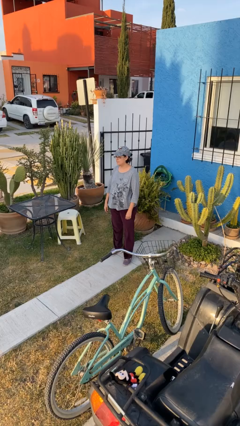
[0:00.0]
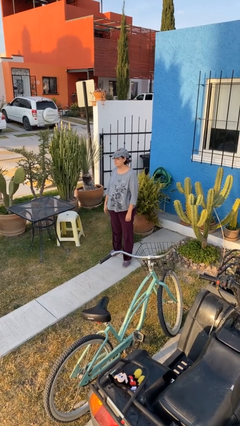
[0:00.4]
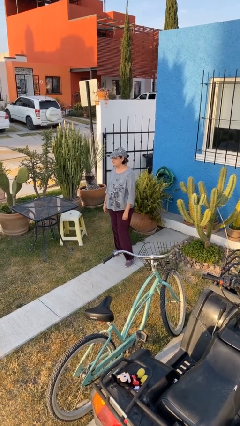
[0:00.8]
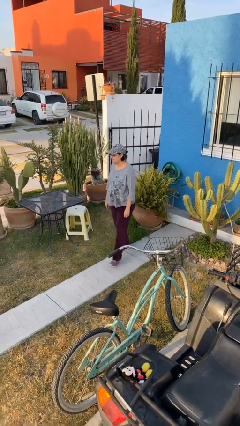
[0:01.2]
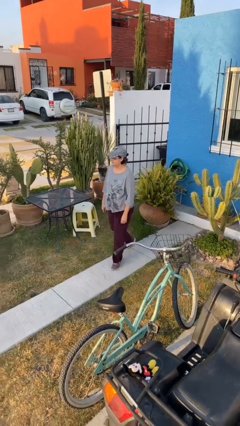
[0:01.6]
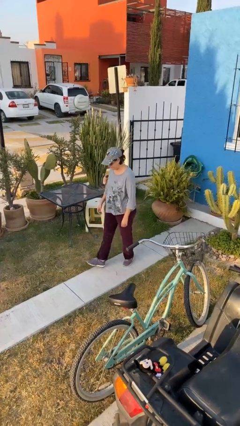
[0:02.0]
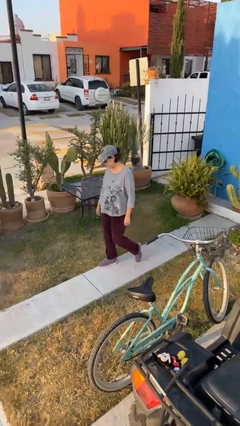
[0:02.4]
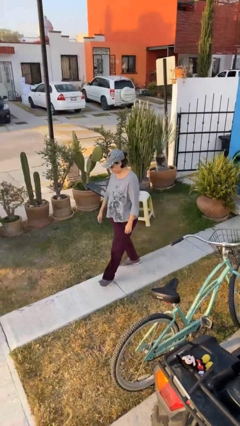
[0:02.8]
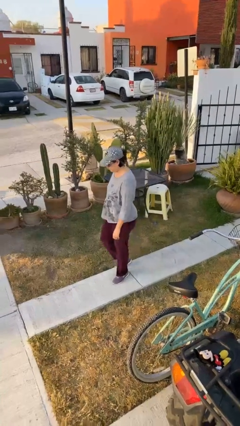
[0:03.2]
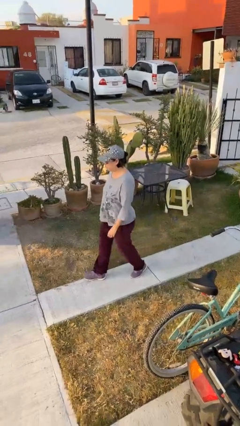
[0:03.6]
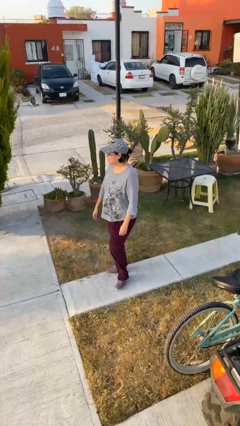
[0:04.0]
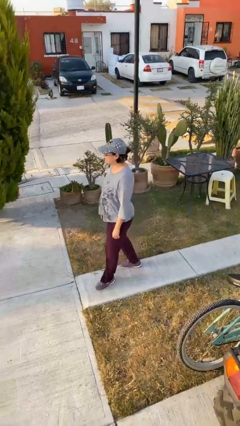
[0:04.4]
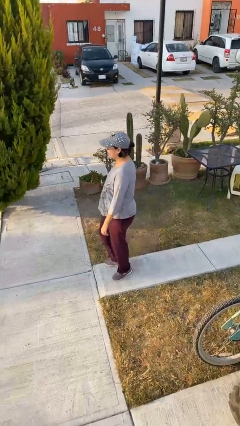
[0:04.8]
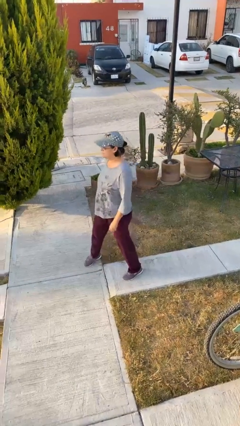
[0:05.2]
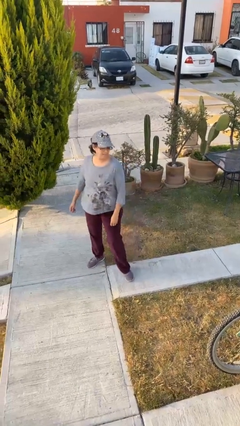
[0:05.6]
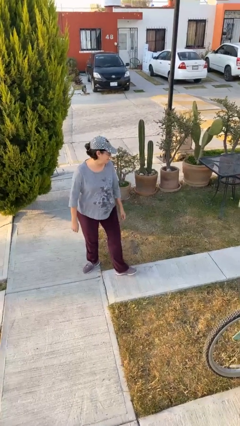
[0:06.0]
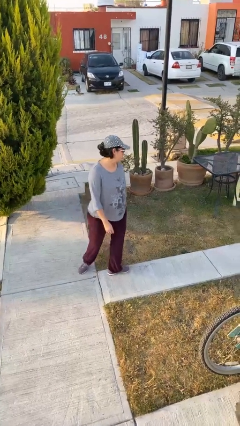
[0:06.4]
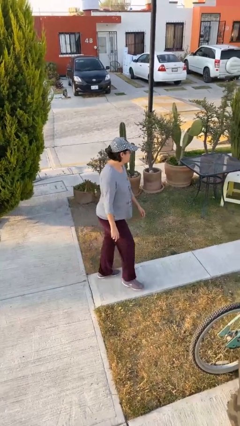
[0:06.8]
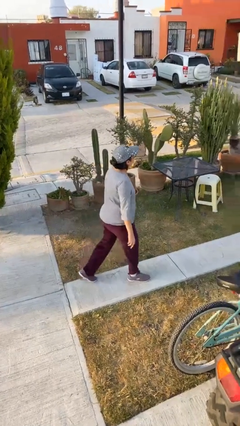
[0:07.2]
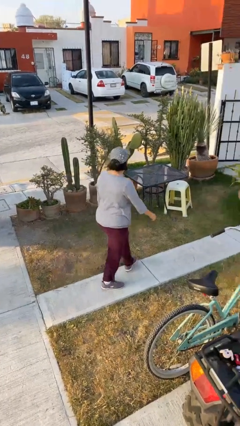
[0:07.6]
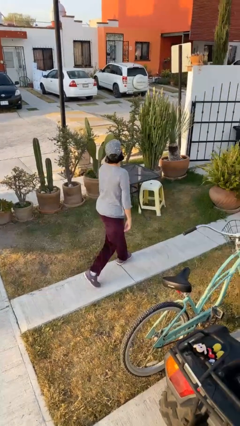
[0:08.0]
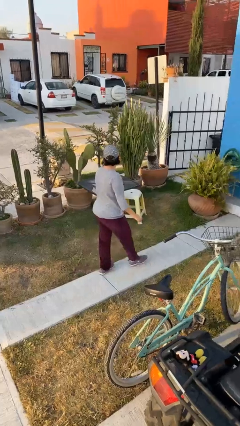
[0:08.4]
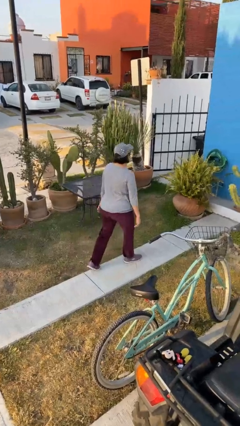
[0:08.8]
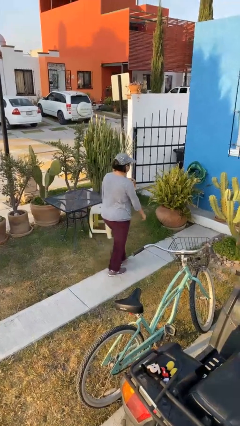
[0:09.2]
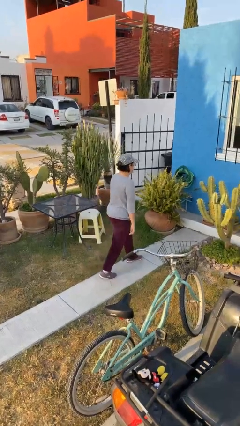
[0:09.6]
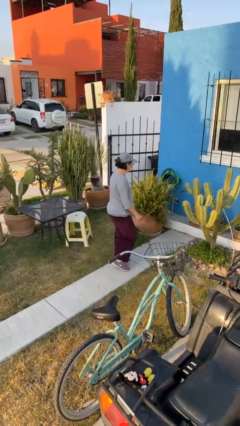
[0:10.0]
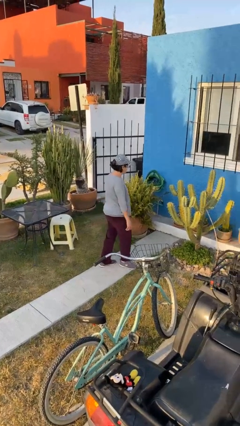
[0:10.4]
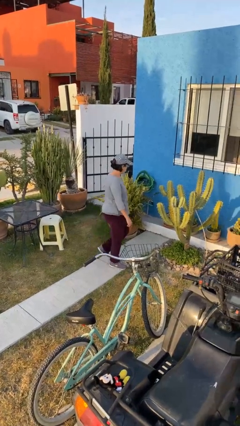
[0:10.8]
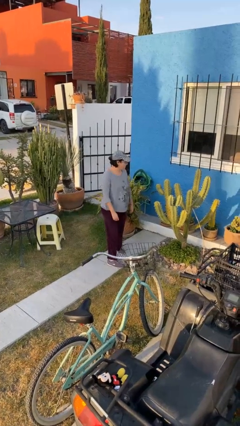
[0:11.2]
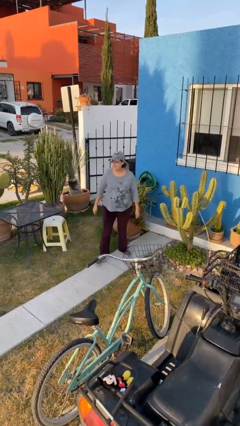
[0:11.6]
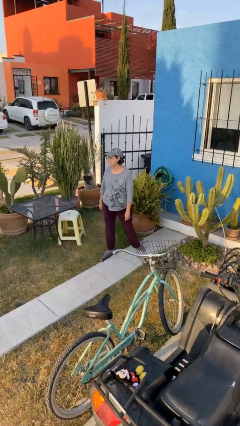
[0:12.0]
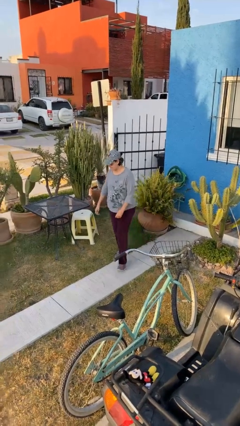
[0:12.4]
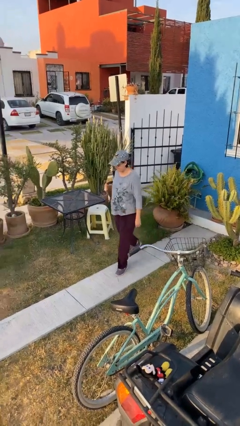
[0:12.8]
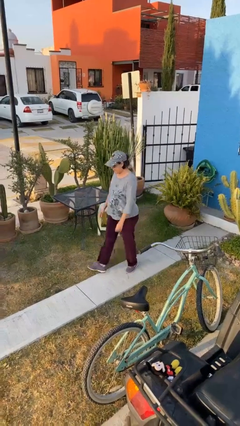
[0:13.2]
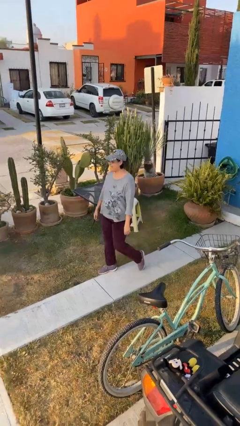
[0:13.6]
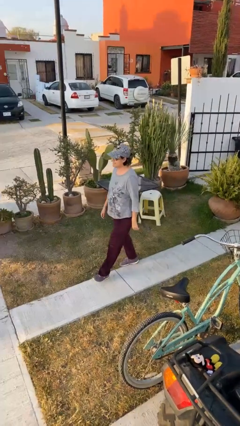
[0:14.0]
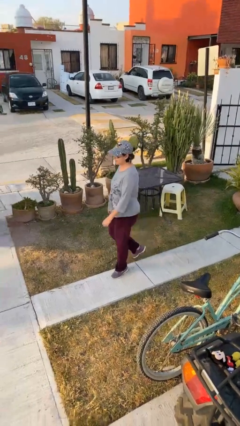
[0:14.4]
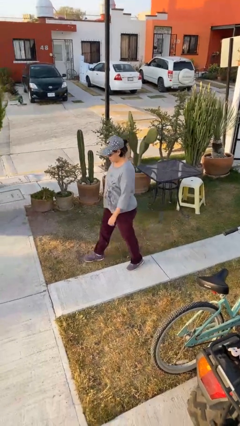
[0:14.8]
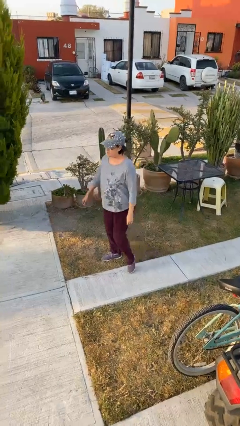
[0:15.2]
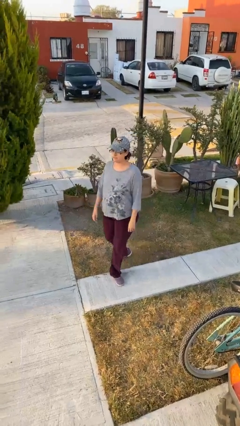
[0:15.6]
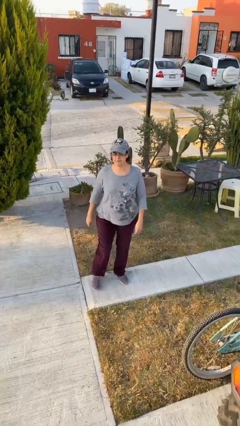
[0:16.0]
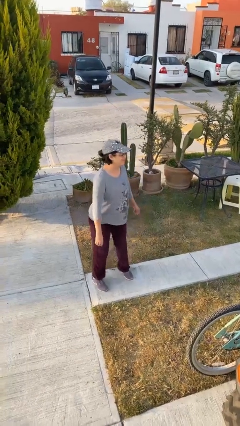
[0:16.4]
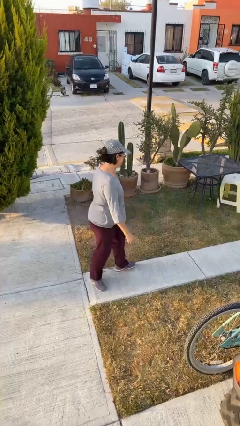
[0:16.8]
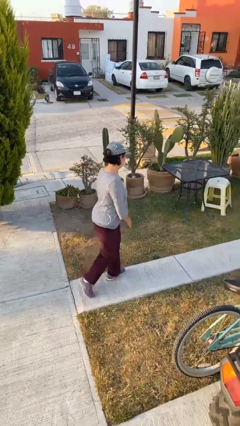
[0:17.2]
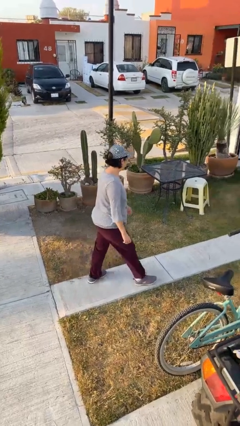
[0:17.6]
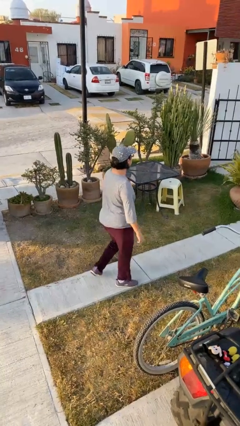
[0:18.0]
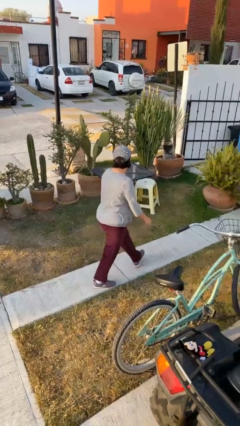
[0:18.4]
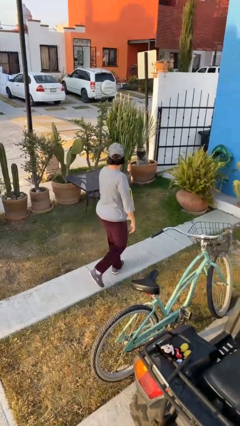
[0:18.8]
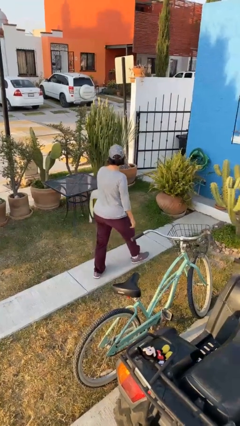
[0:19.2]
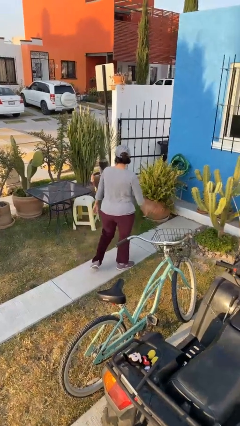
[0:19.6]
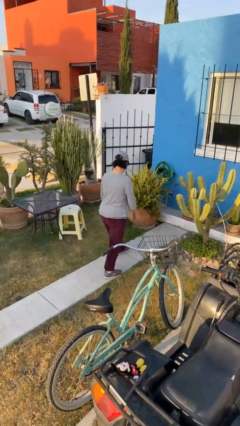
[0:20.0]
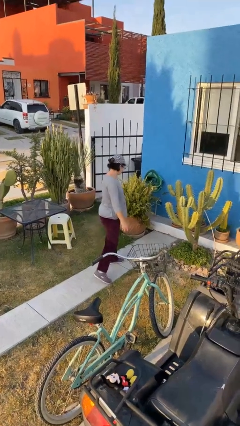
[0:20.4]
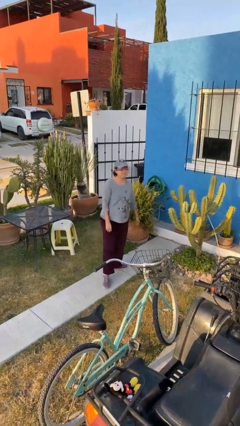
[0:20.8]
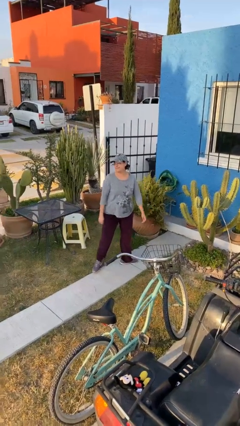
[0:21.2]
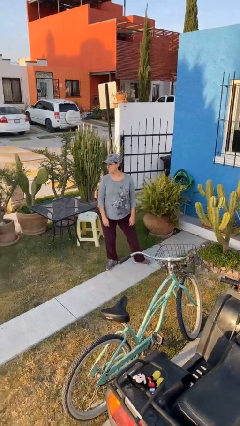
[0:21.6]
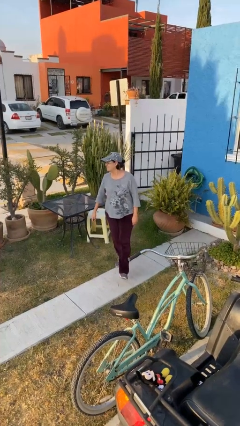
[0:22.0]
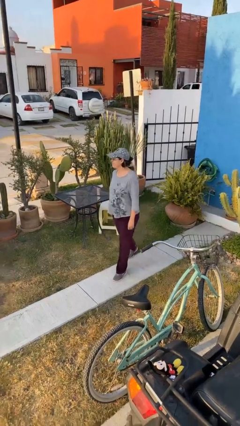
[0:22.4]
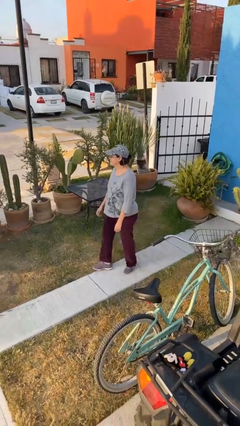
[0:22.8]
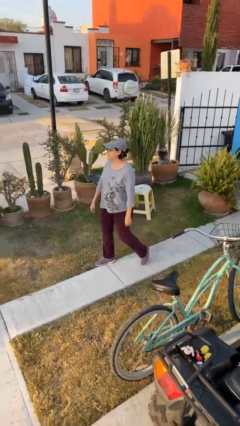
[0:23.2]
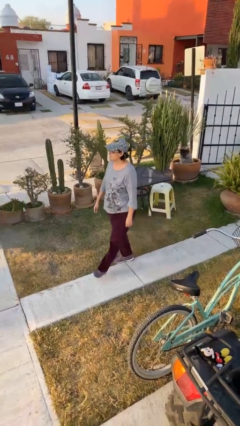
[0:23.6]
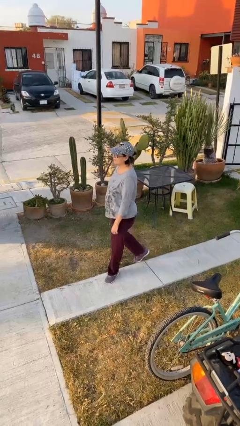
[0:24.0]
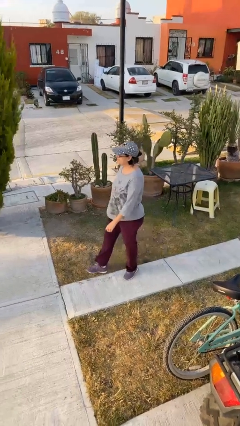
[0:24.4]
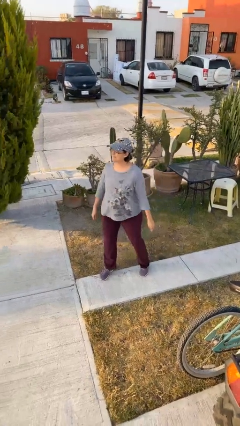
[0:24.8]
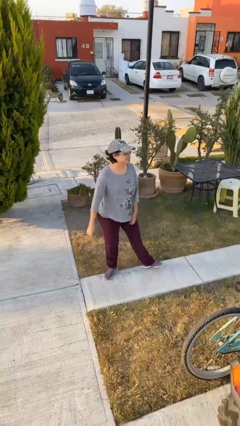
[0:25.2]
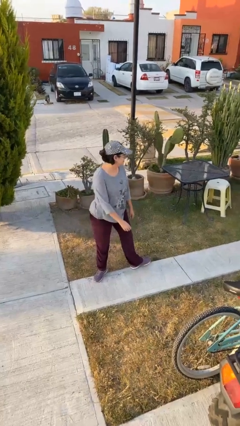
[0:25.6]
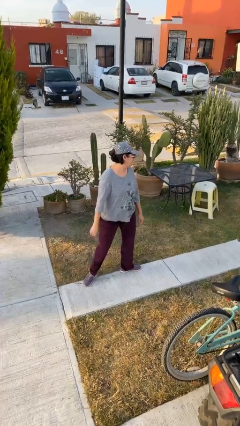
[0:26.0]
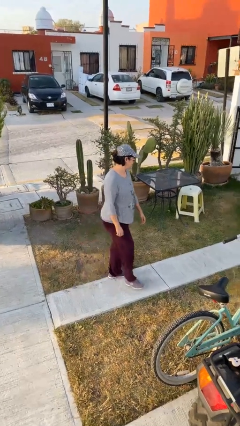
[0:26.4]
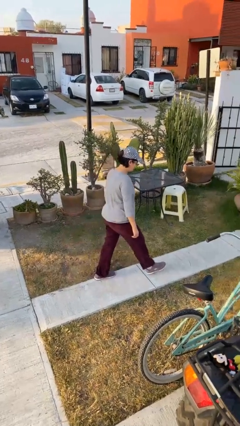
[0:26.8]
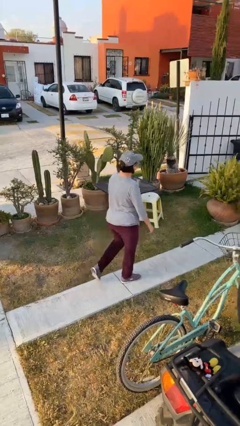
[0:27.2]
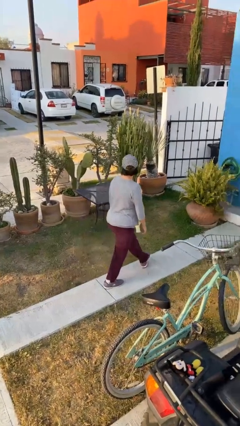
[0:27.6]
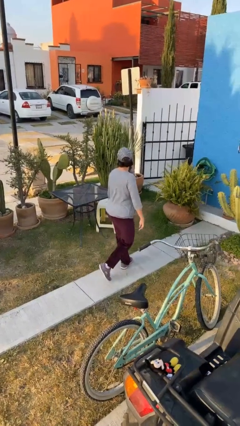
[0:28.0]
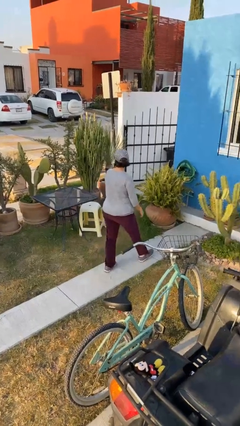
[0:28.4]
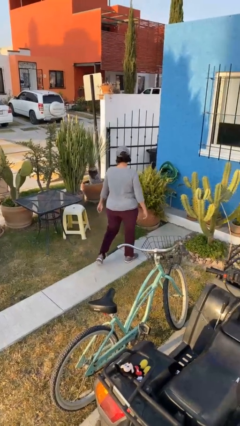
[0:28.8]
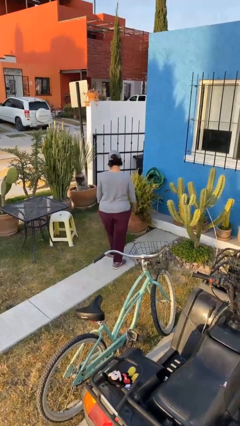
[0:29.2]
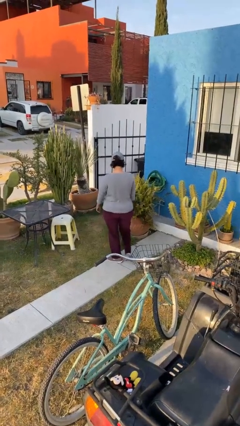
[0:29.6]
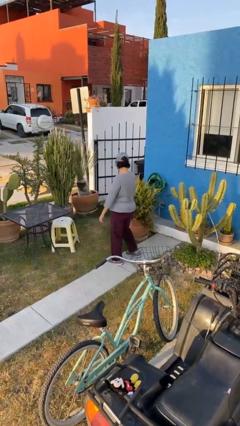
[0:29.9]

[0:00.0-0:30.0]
person walks

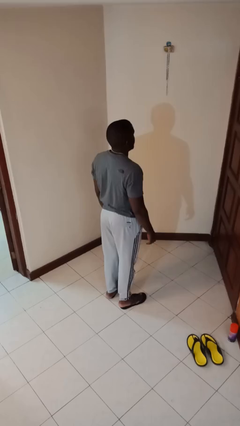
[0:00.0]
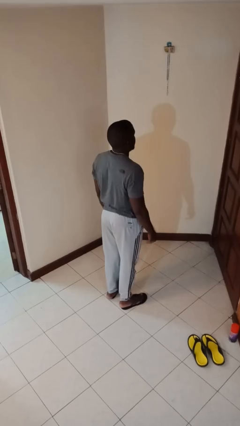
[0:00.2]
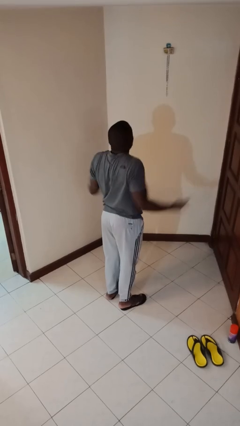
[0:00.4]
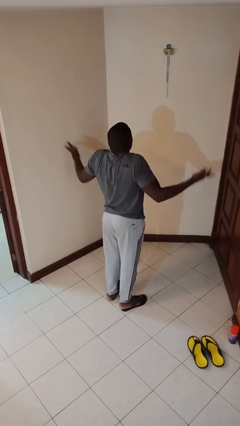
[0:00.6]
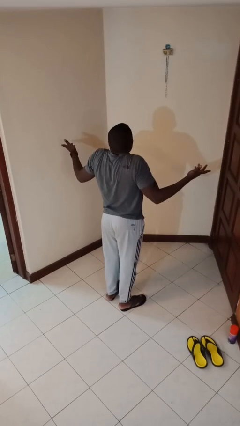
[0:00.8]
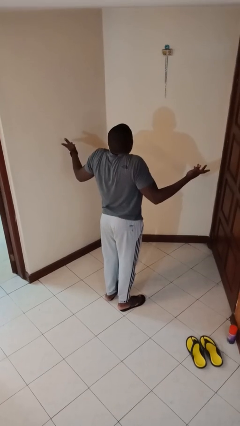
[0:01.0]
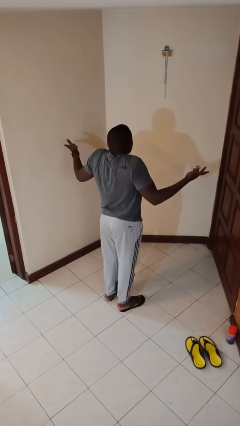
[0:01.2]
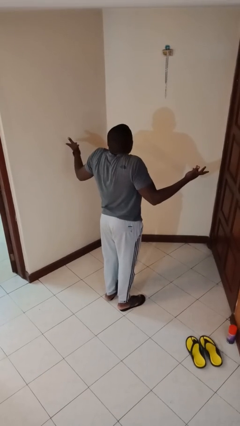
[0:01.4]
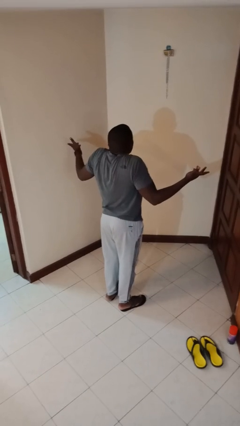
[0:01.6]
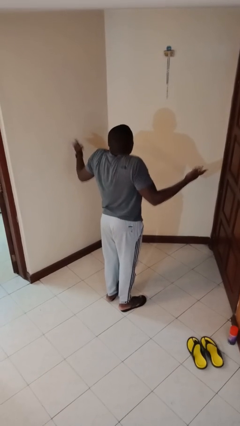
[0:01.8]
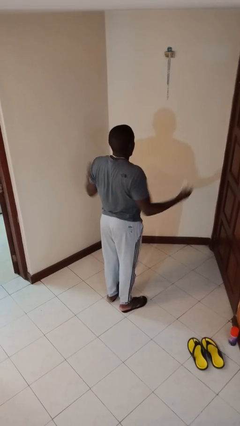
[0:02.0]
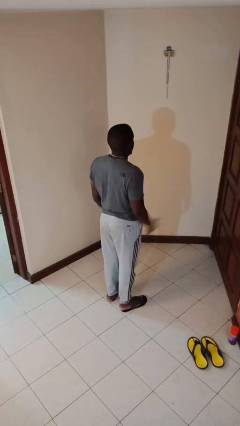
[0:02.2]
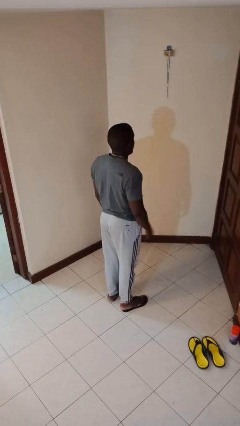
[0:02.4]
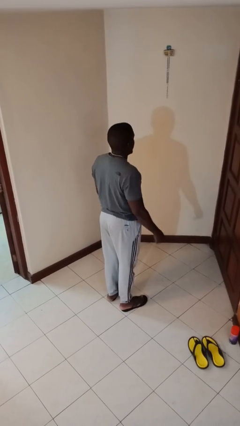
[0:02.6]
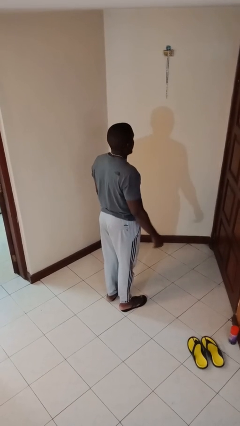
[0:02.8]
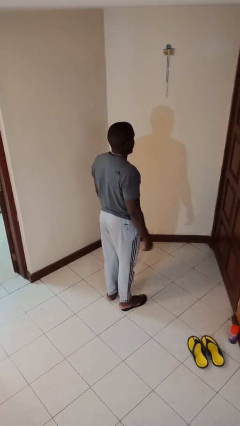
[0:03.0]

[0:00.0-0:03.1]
person shrugs

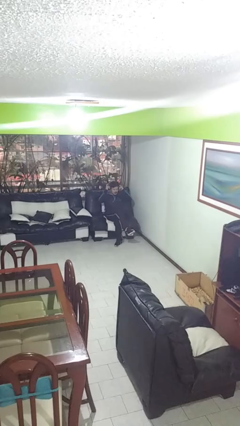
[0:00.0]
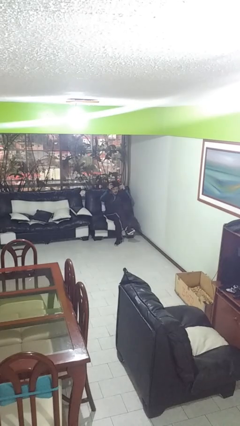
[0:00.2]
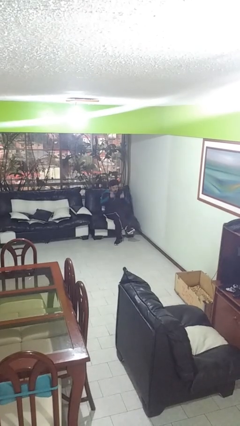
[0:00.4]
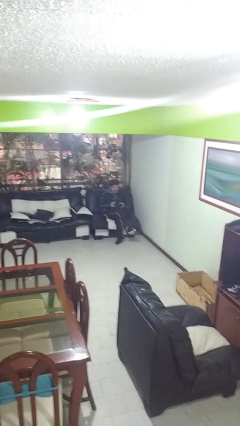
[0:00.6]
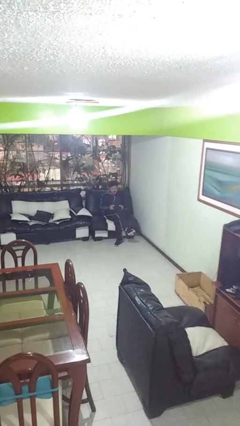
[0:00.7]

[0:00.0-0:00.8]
person takes off headphones
